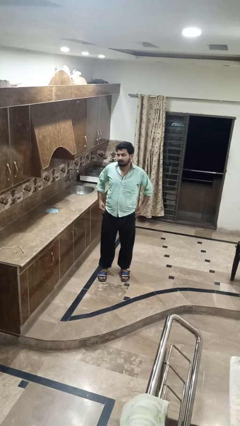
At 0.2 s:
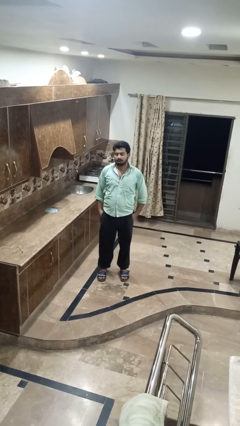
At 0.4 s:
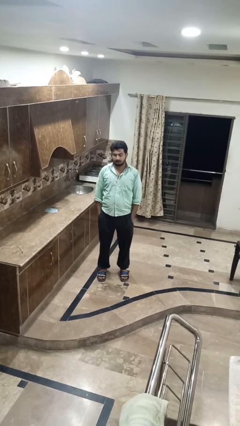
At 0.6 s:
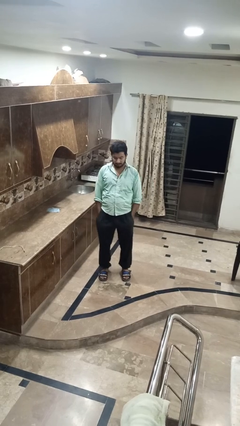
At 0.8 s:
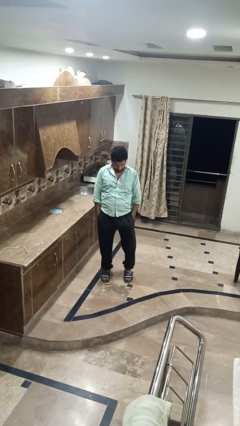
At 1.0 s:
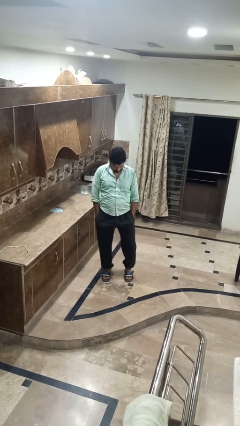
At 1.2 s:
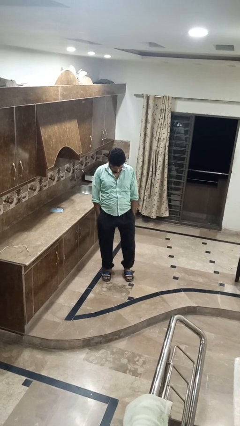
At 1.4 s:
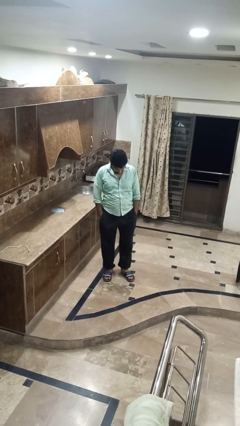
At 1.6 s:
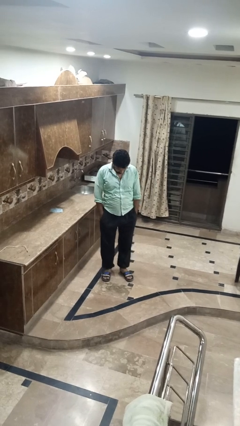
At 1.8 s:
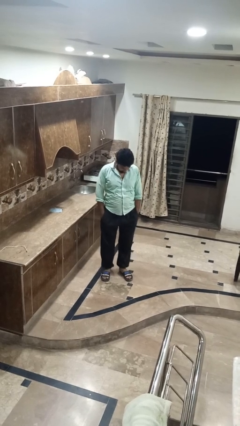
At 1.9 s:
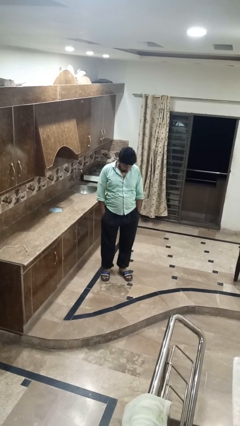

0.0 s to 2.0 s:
person puts hands in back pockets

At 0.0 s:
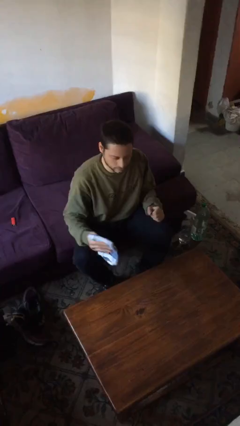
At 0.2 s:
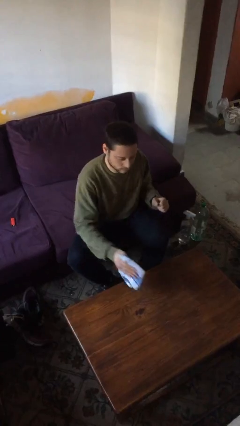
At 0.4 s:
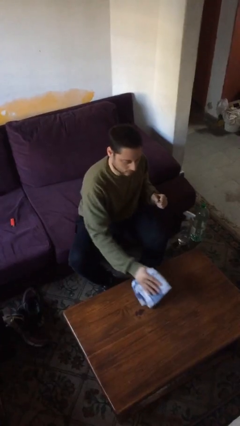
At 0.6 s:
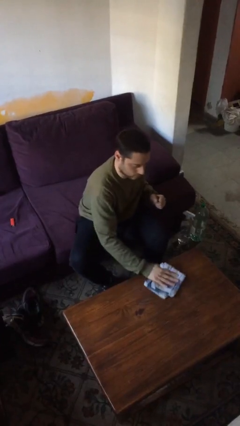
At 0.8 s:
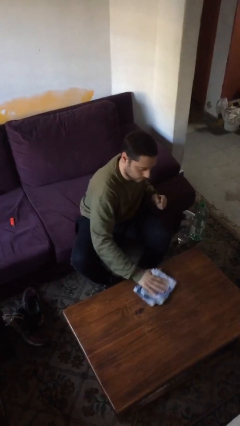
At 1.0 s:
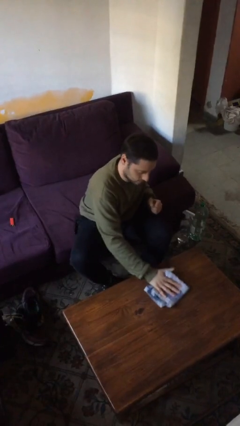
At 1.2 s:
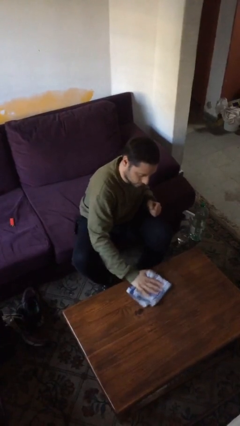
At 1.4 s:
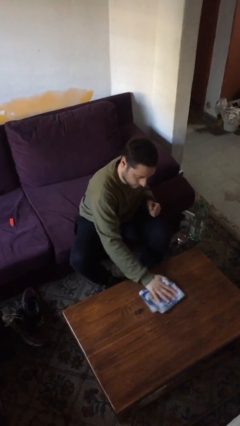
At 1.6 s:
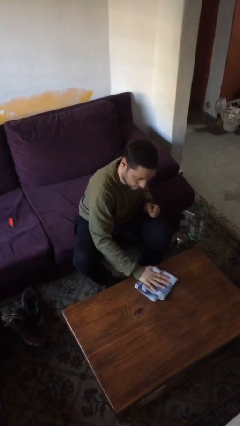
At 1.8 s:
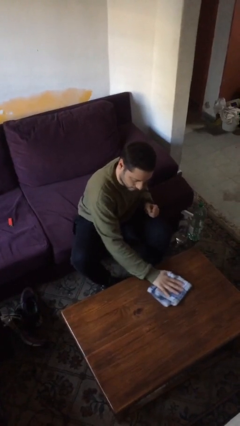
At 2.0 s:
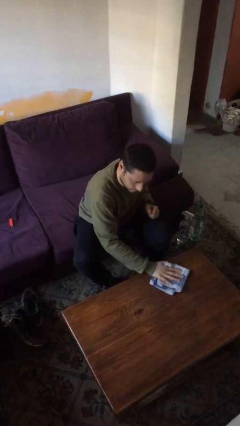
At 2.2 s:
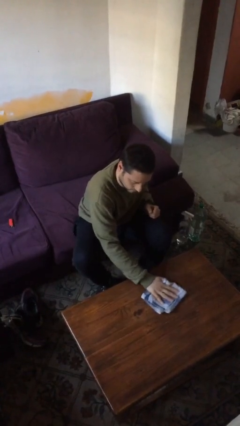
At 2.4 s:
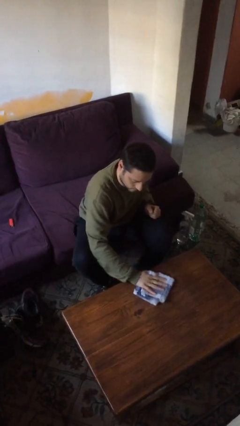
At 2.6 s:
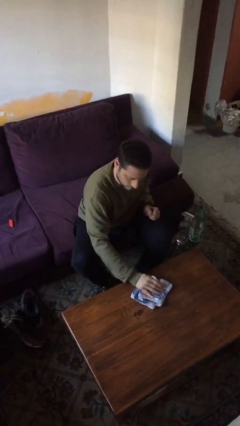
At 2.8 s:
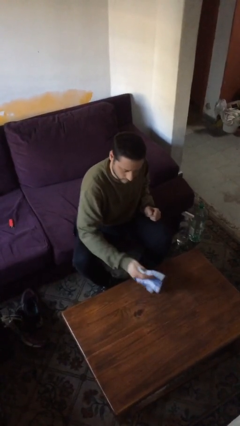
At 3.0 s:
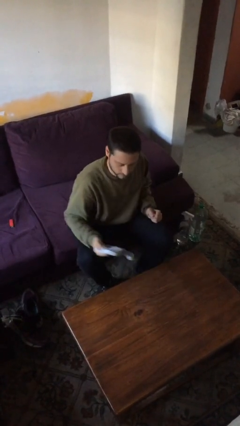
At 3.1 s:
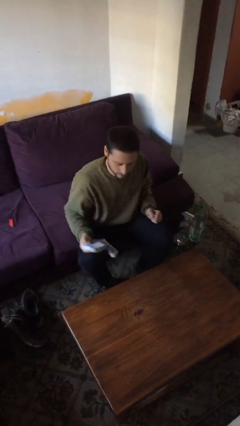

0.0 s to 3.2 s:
person cleans table with rag

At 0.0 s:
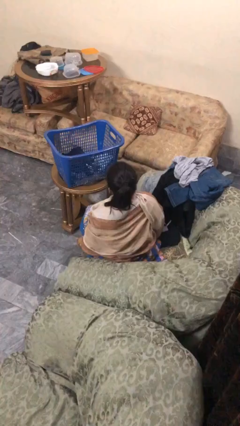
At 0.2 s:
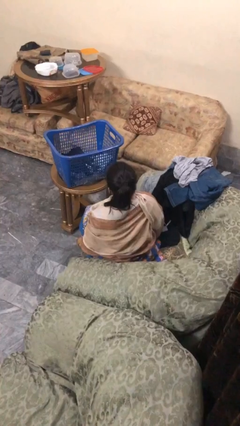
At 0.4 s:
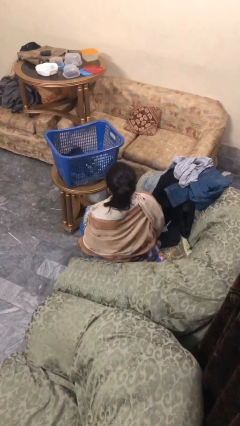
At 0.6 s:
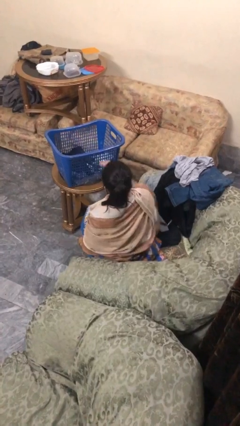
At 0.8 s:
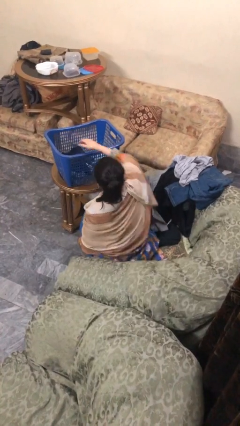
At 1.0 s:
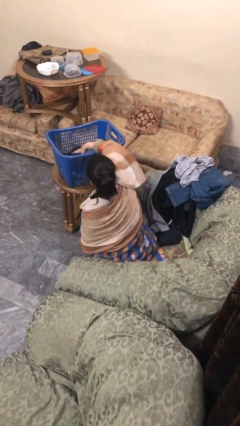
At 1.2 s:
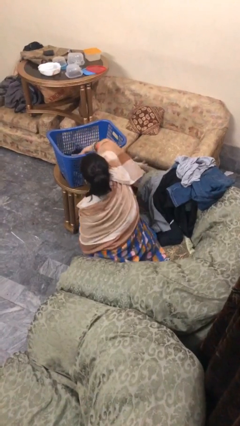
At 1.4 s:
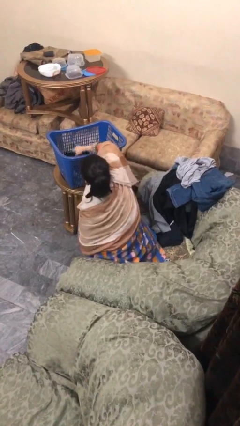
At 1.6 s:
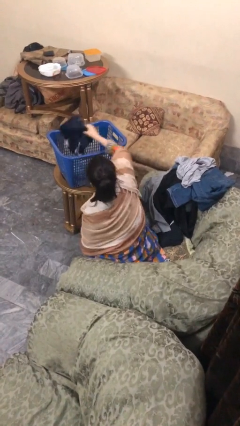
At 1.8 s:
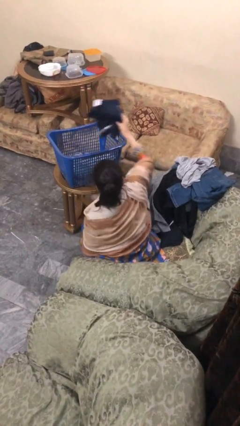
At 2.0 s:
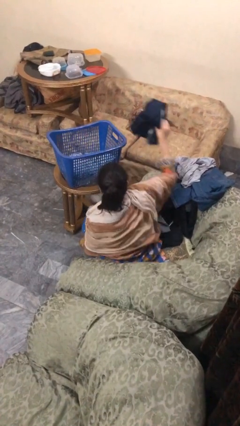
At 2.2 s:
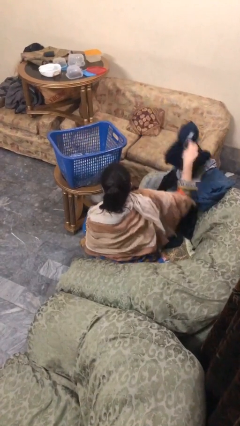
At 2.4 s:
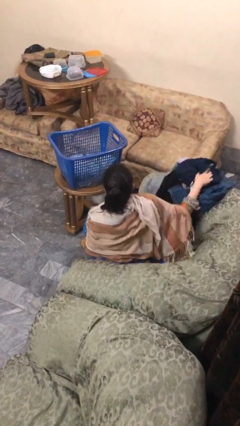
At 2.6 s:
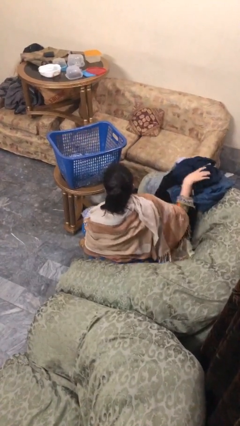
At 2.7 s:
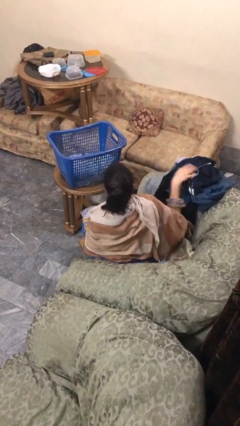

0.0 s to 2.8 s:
person takes object from basket

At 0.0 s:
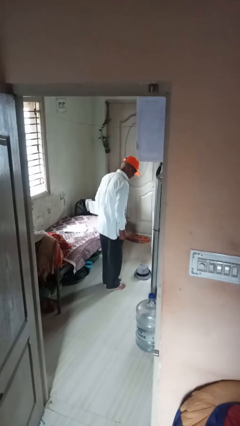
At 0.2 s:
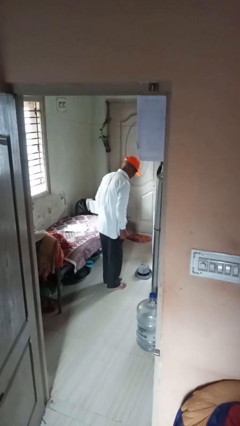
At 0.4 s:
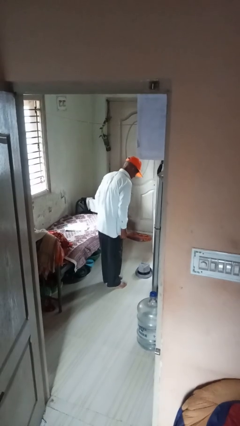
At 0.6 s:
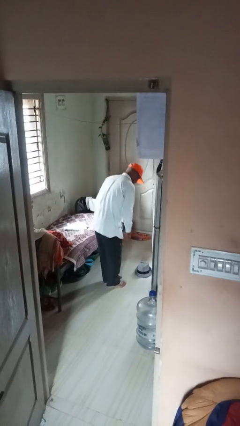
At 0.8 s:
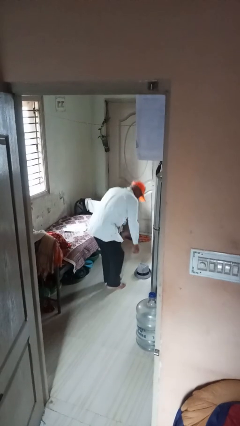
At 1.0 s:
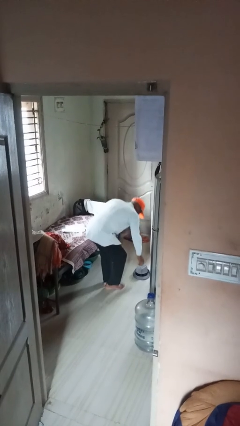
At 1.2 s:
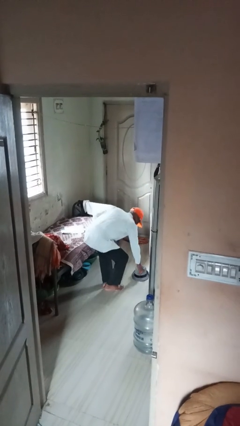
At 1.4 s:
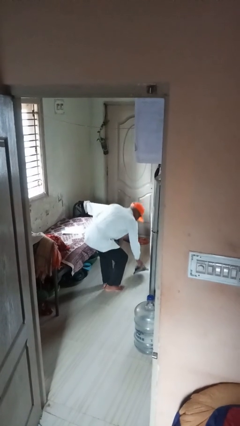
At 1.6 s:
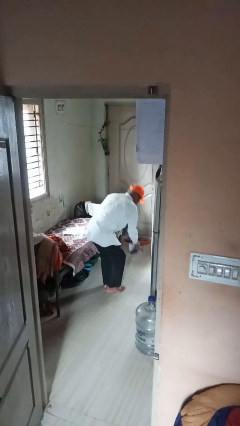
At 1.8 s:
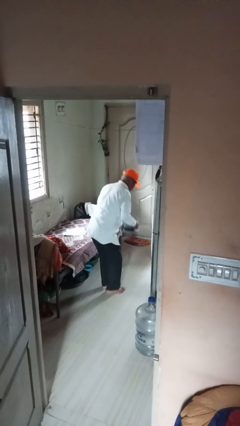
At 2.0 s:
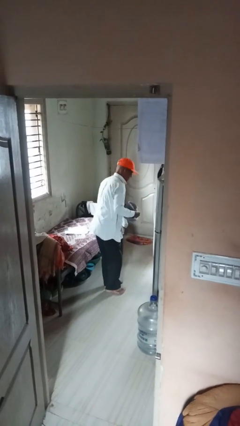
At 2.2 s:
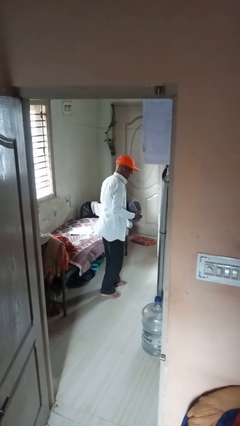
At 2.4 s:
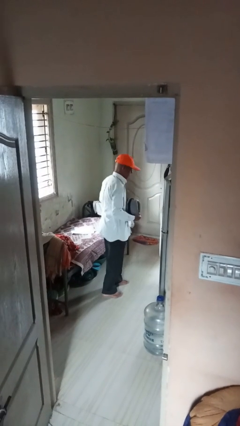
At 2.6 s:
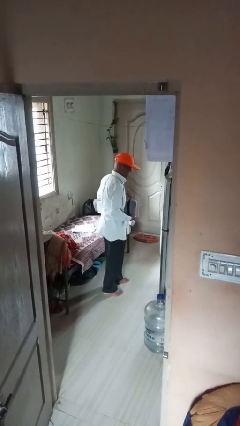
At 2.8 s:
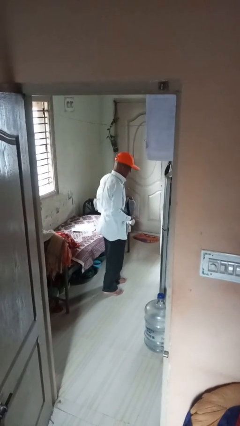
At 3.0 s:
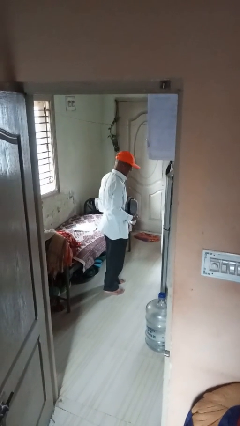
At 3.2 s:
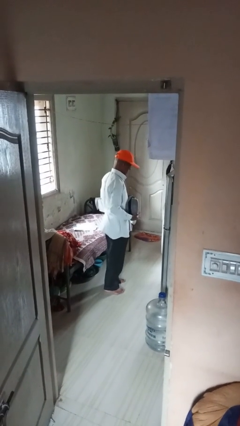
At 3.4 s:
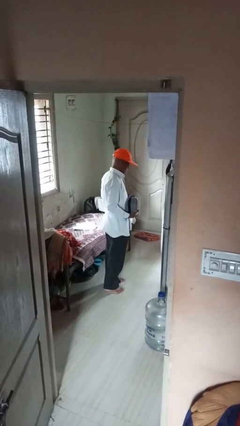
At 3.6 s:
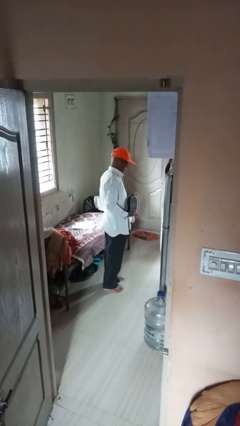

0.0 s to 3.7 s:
person picks up object from floor

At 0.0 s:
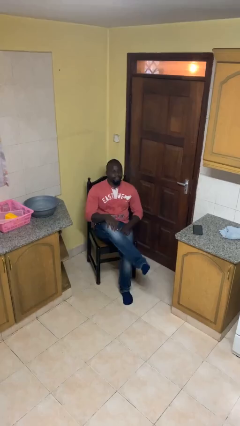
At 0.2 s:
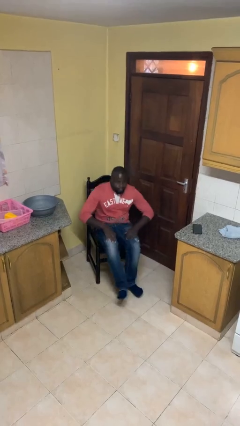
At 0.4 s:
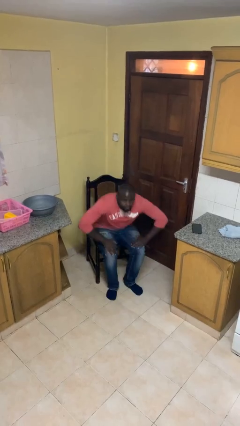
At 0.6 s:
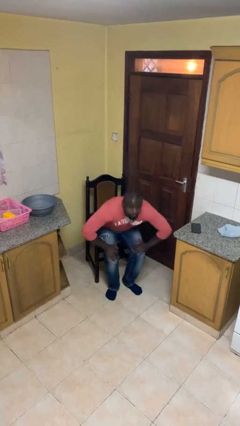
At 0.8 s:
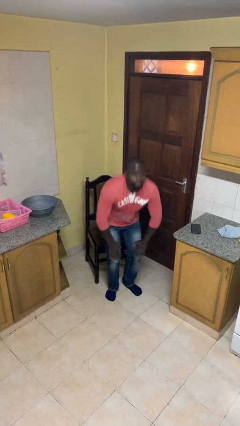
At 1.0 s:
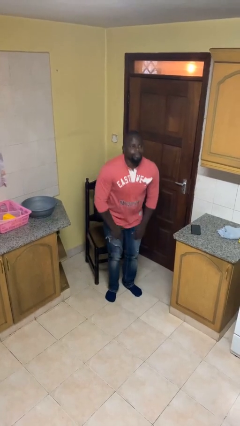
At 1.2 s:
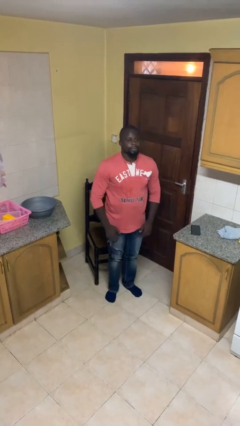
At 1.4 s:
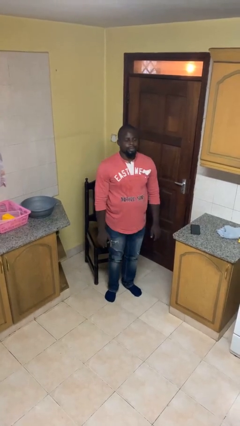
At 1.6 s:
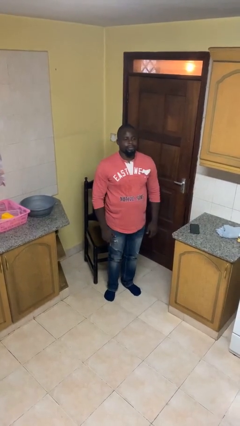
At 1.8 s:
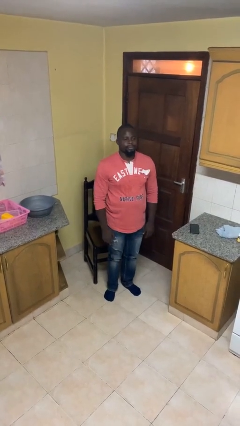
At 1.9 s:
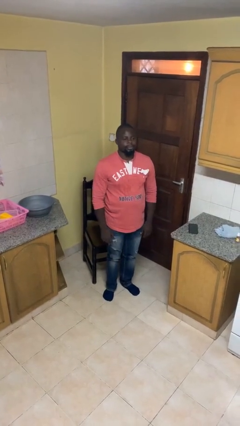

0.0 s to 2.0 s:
person stands up

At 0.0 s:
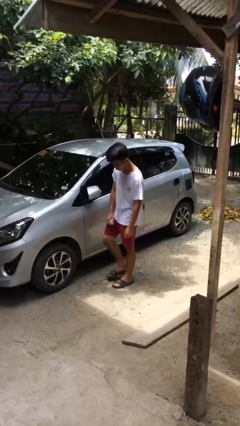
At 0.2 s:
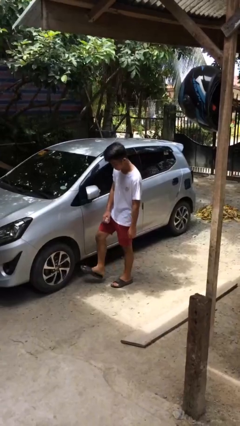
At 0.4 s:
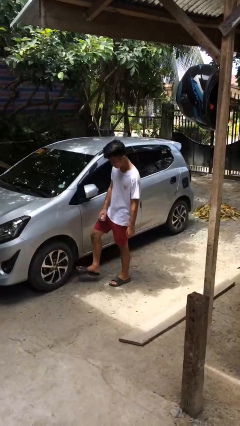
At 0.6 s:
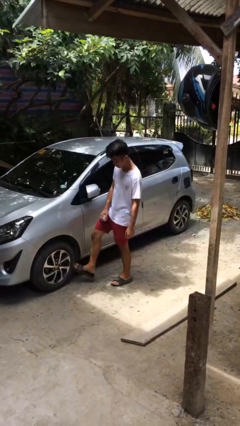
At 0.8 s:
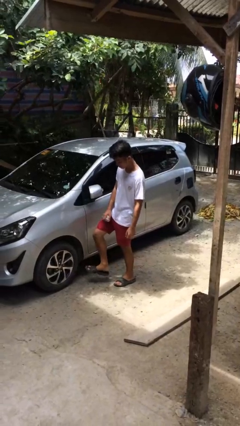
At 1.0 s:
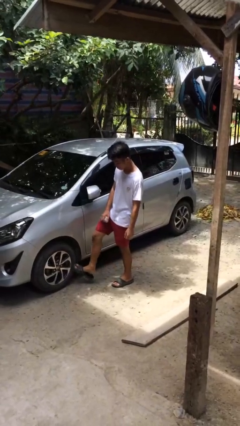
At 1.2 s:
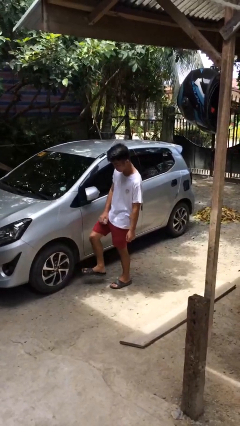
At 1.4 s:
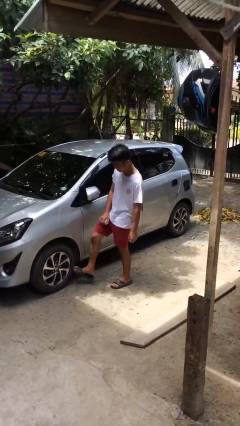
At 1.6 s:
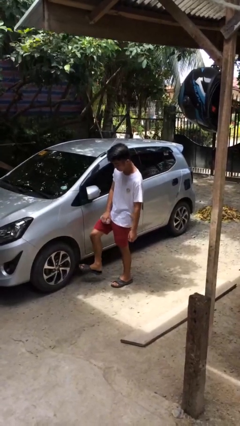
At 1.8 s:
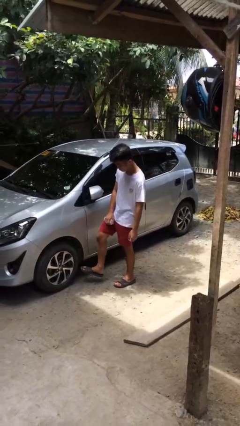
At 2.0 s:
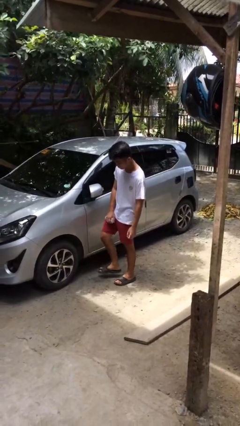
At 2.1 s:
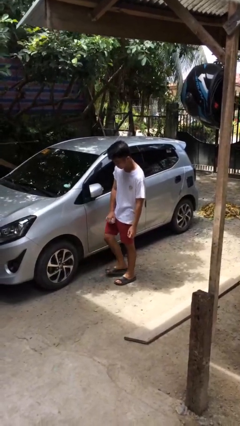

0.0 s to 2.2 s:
person kicks car tires

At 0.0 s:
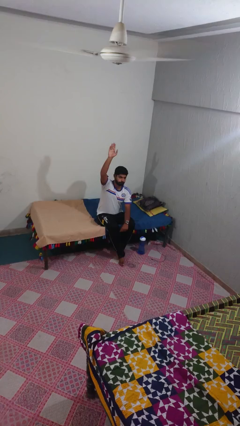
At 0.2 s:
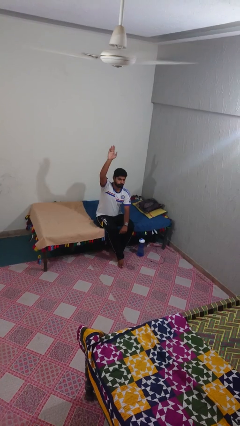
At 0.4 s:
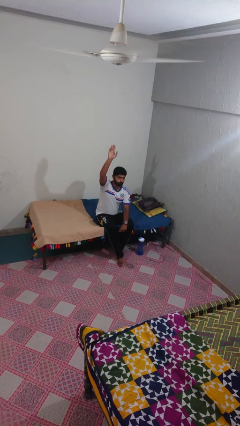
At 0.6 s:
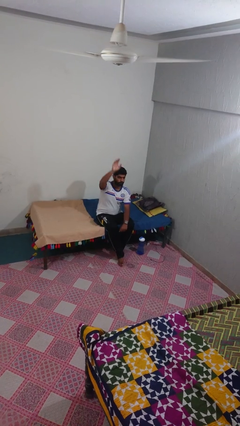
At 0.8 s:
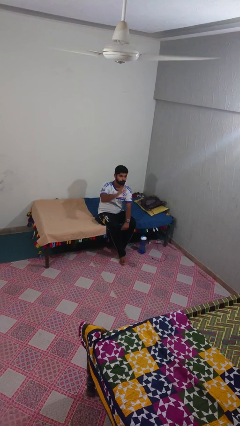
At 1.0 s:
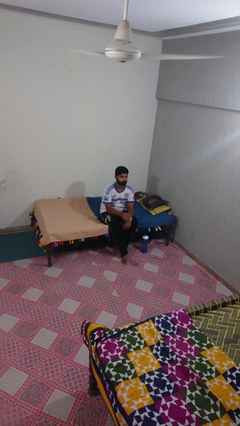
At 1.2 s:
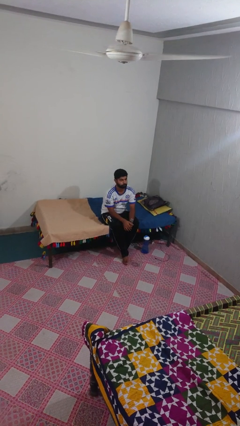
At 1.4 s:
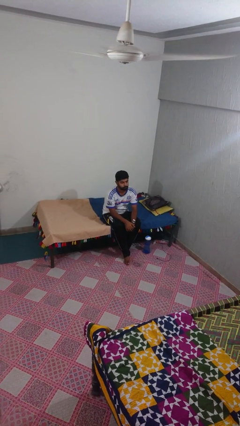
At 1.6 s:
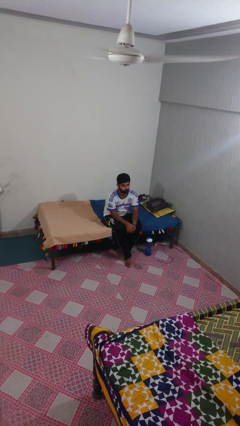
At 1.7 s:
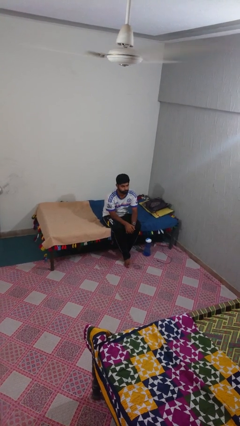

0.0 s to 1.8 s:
person gestures lower hand
